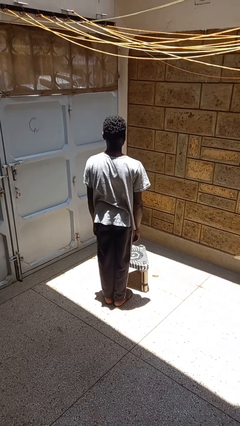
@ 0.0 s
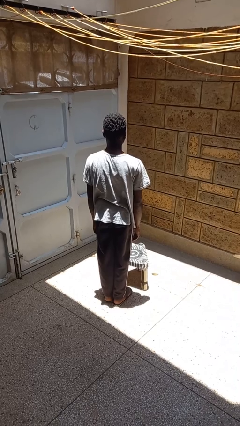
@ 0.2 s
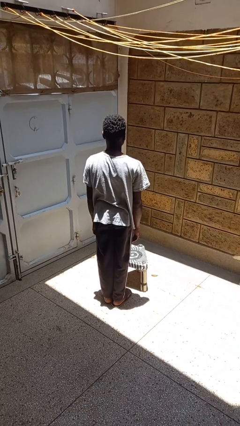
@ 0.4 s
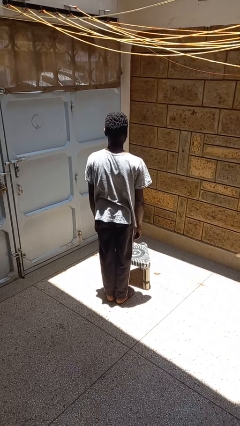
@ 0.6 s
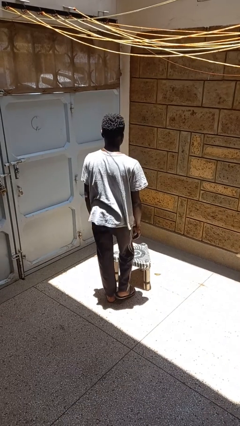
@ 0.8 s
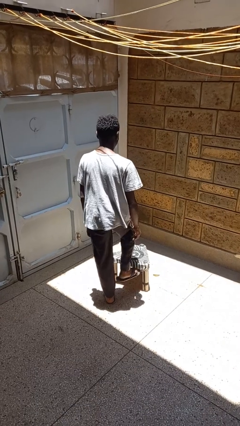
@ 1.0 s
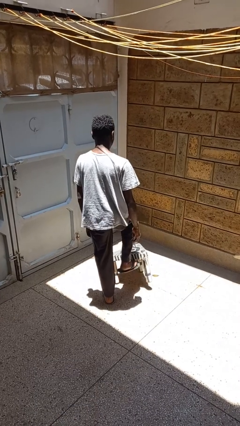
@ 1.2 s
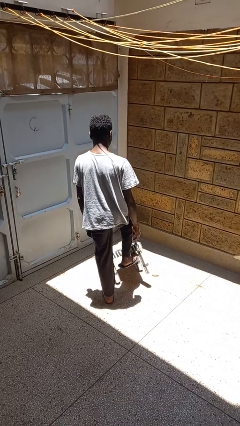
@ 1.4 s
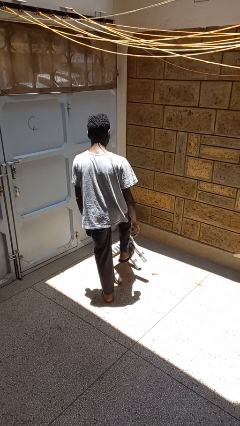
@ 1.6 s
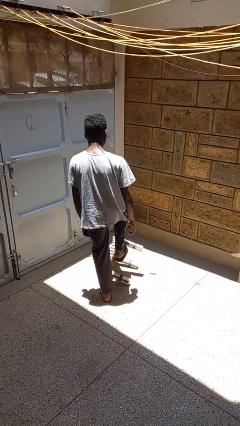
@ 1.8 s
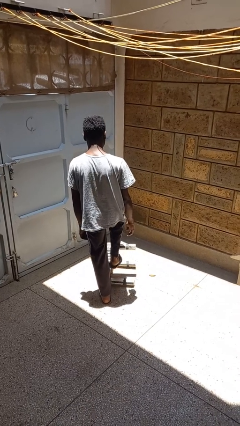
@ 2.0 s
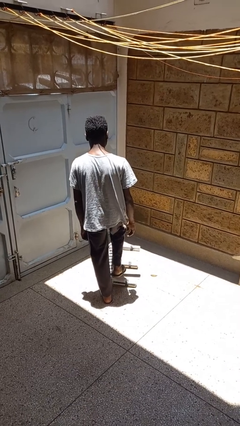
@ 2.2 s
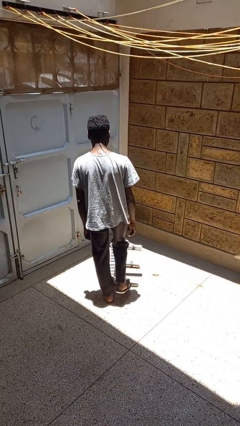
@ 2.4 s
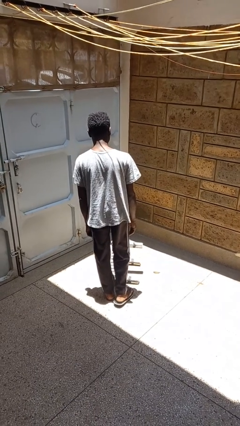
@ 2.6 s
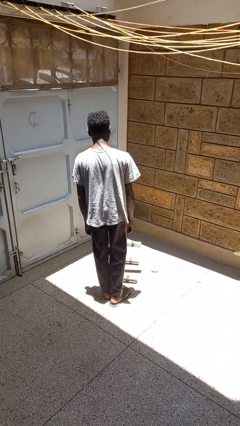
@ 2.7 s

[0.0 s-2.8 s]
person knocks over furniture

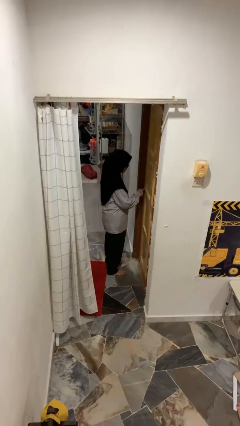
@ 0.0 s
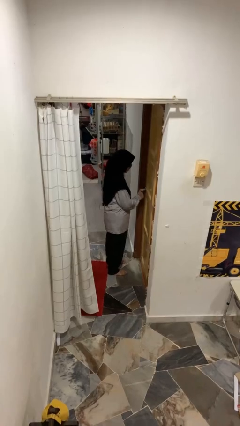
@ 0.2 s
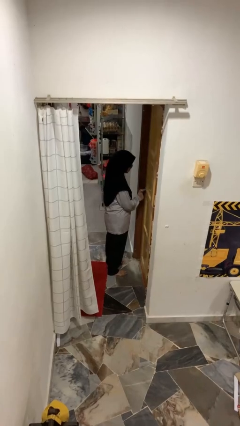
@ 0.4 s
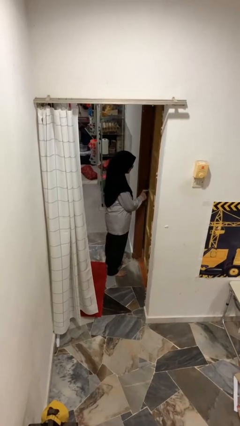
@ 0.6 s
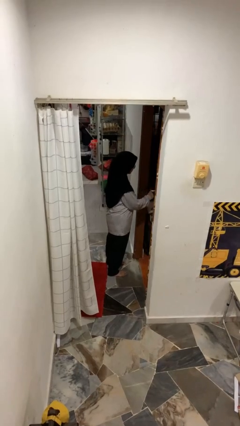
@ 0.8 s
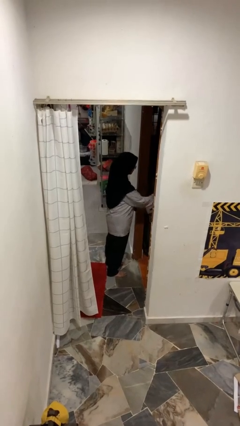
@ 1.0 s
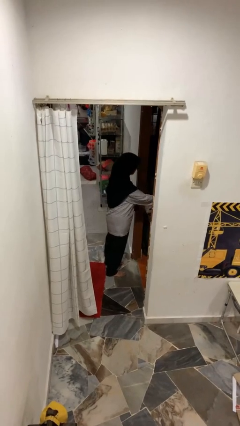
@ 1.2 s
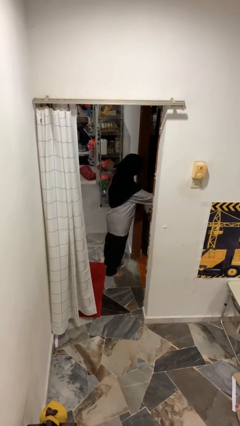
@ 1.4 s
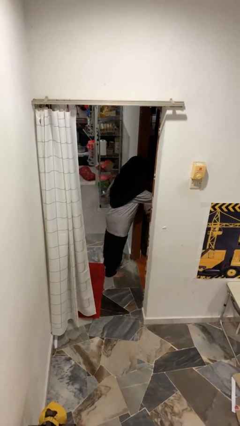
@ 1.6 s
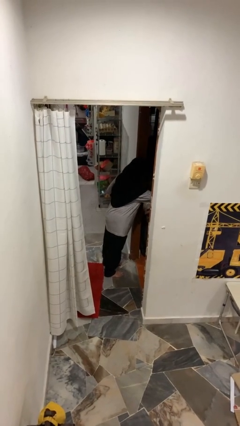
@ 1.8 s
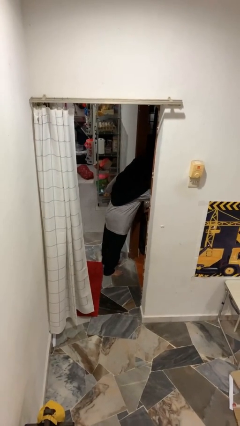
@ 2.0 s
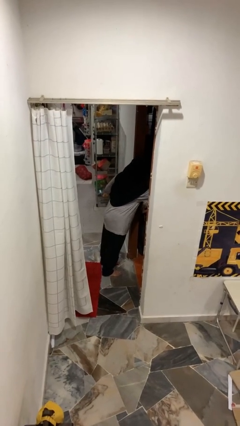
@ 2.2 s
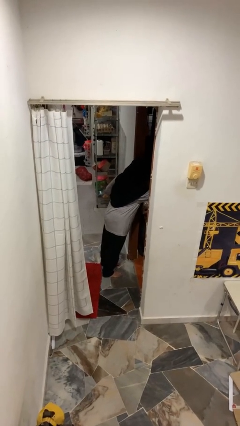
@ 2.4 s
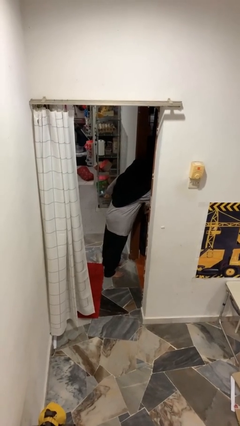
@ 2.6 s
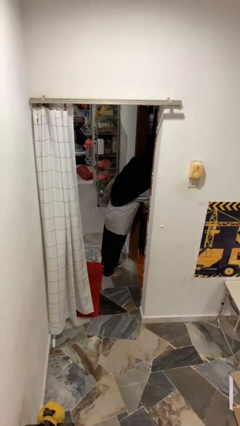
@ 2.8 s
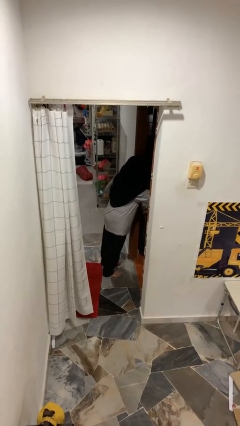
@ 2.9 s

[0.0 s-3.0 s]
person opens facility door

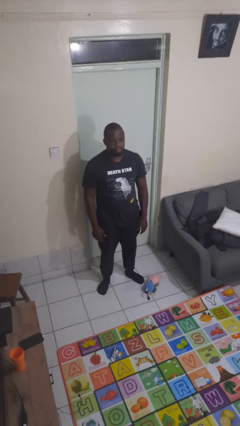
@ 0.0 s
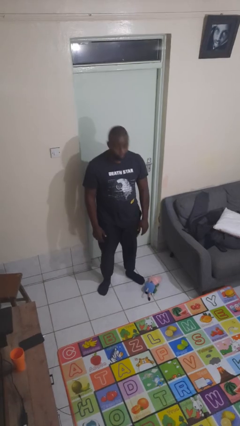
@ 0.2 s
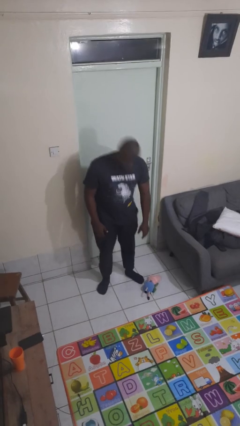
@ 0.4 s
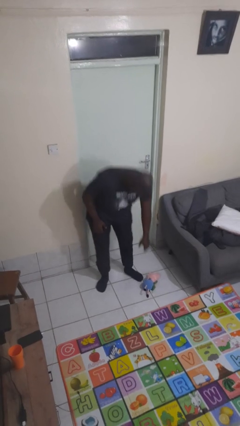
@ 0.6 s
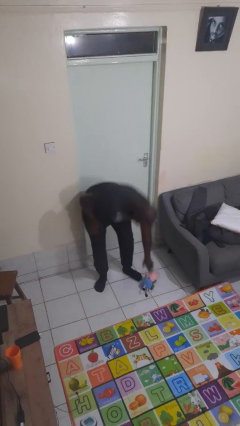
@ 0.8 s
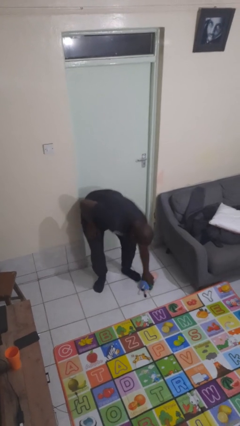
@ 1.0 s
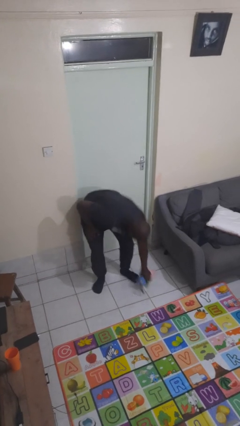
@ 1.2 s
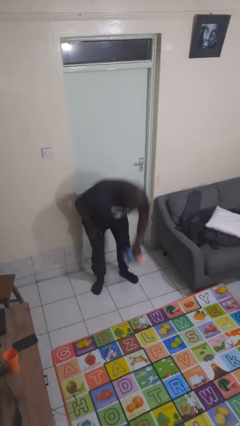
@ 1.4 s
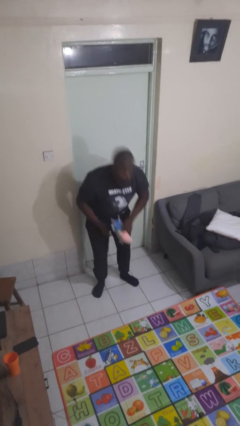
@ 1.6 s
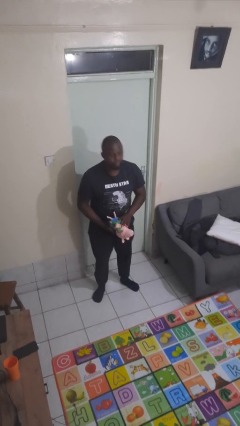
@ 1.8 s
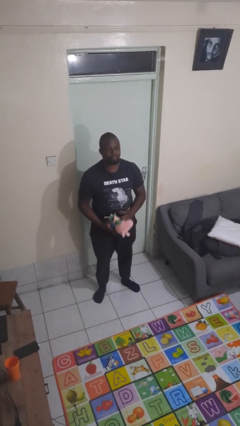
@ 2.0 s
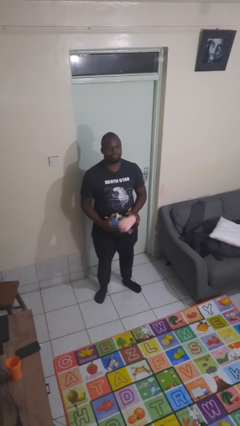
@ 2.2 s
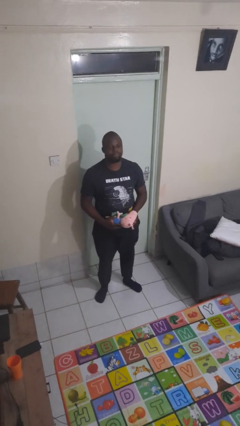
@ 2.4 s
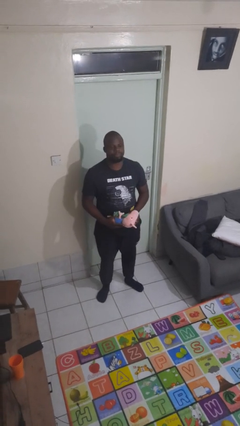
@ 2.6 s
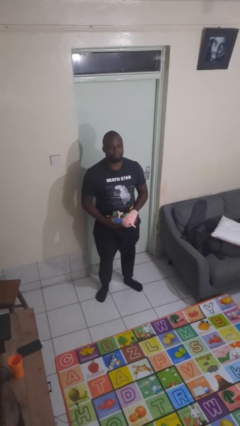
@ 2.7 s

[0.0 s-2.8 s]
person picks up object from floor

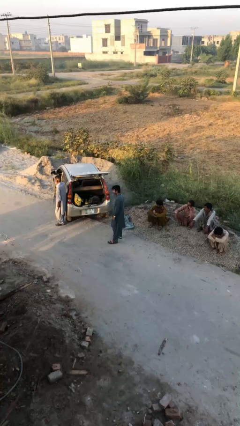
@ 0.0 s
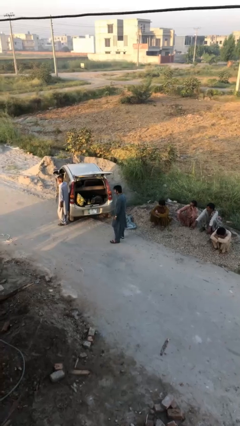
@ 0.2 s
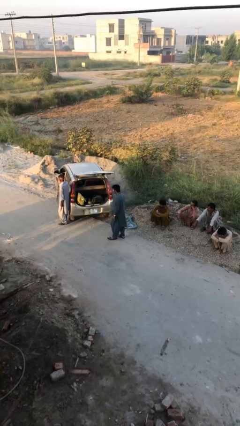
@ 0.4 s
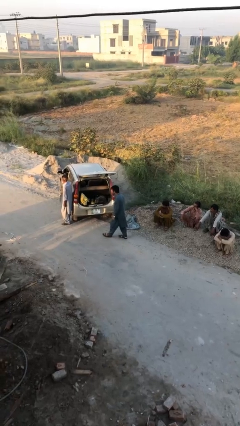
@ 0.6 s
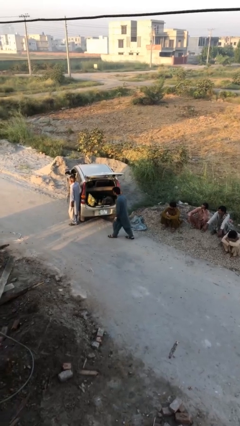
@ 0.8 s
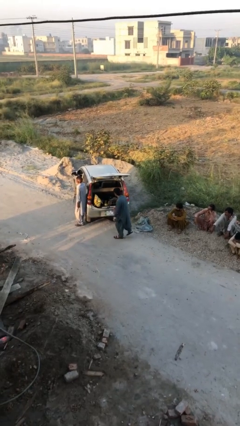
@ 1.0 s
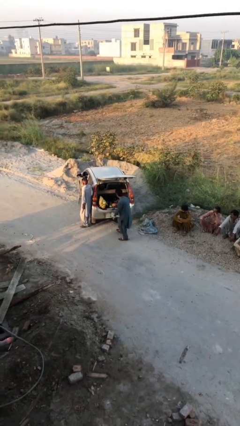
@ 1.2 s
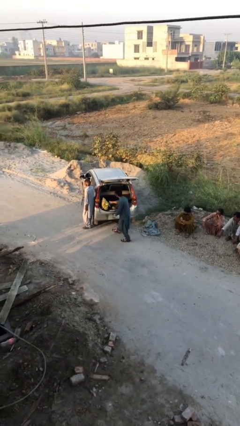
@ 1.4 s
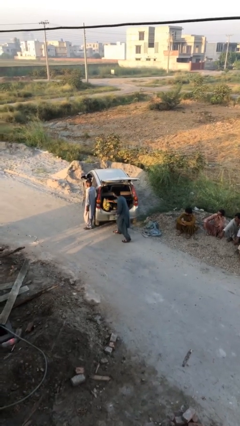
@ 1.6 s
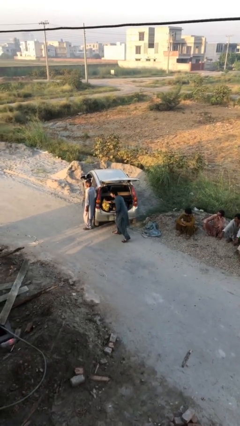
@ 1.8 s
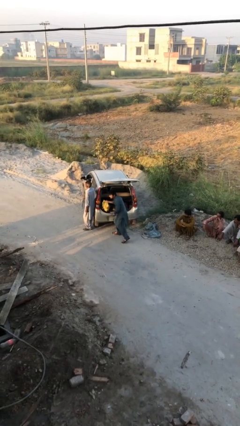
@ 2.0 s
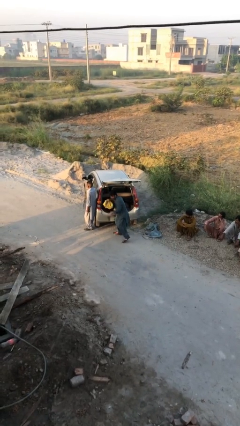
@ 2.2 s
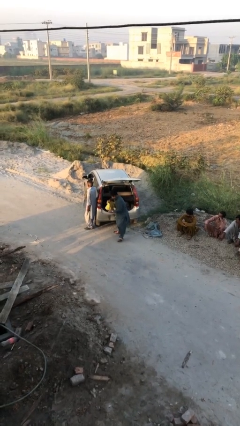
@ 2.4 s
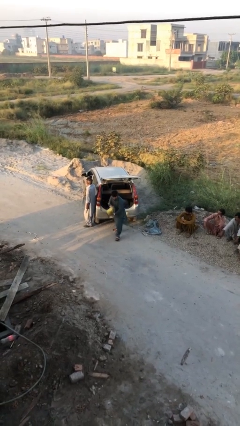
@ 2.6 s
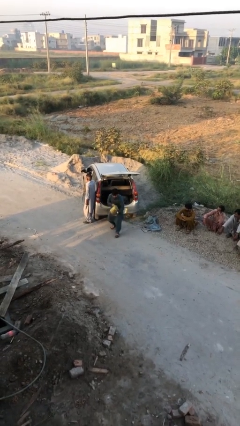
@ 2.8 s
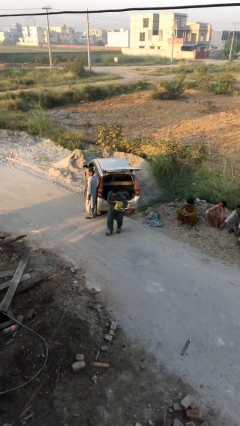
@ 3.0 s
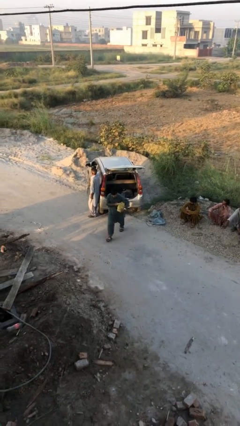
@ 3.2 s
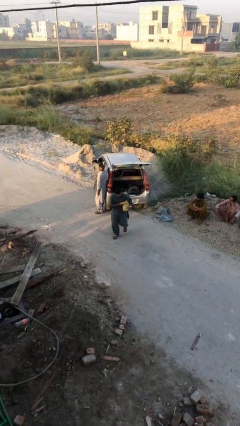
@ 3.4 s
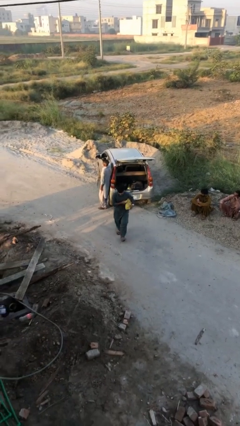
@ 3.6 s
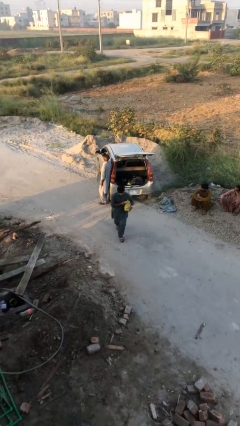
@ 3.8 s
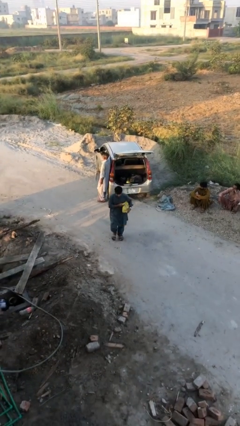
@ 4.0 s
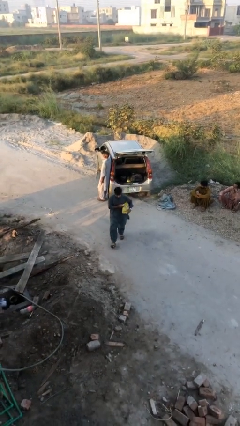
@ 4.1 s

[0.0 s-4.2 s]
person steals object from person

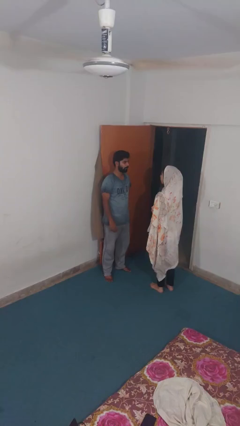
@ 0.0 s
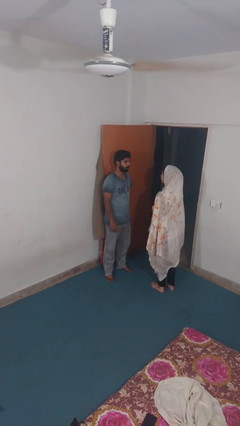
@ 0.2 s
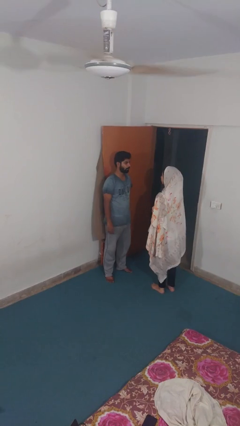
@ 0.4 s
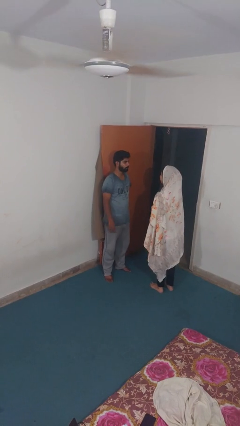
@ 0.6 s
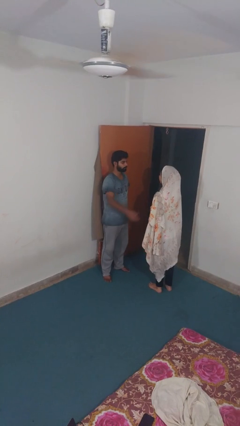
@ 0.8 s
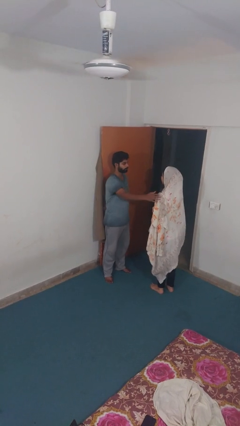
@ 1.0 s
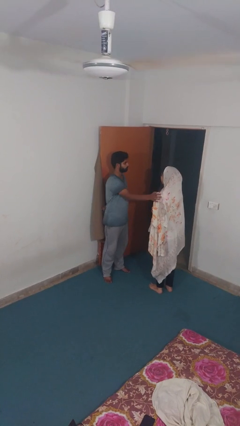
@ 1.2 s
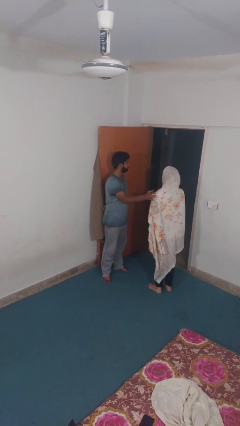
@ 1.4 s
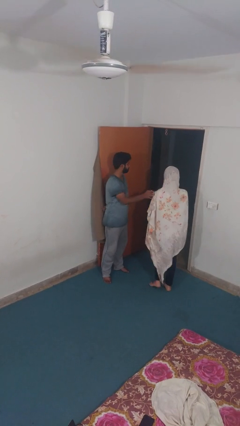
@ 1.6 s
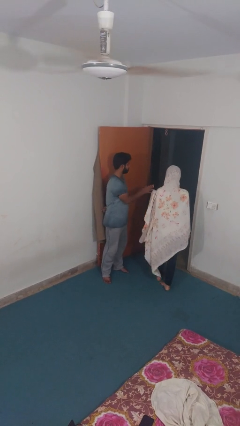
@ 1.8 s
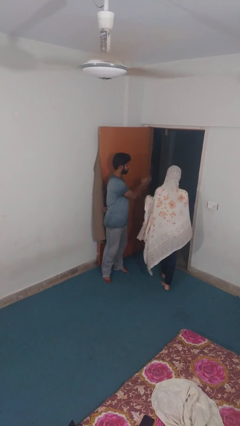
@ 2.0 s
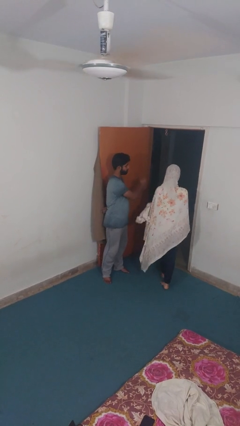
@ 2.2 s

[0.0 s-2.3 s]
person shoves person

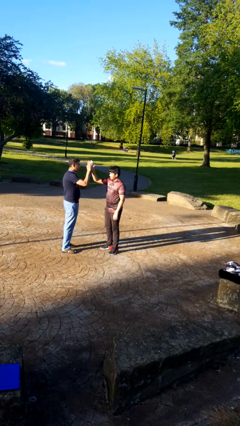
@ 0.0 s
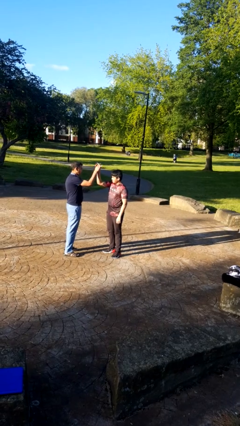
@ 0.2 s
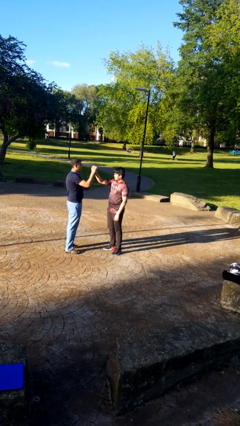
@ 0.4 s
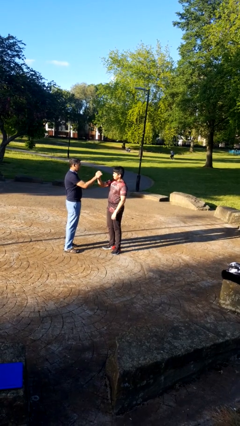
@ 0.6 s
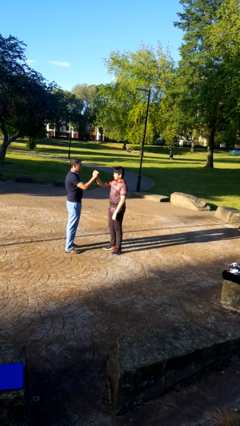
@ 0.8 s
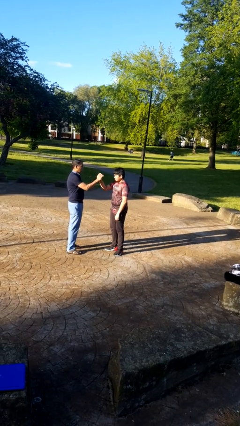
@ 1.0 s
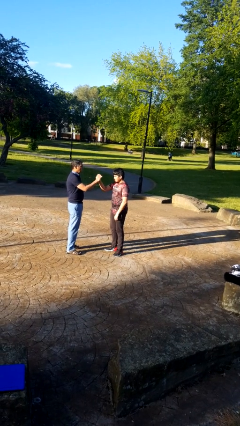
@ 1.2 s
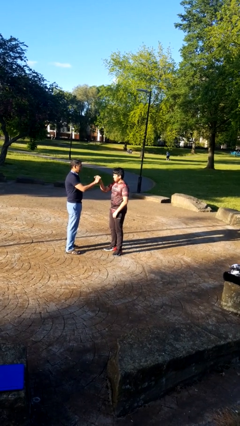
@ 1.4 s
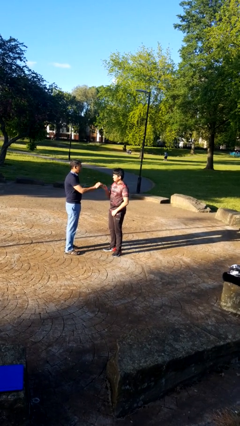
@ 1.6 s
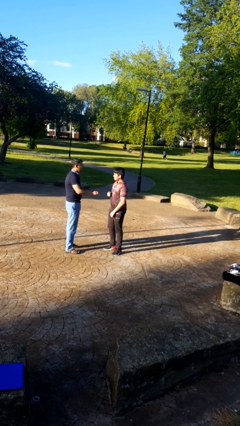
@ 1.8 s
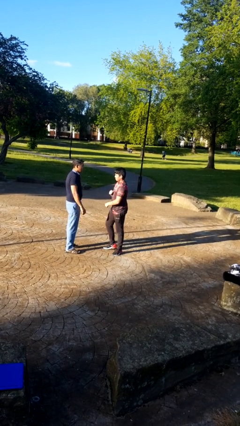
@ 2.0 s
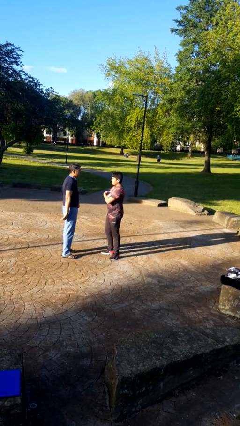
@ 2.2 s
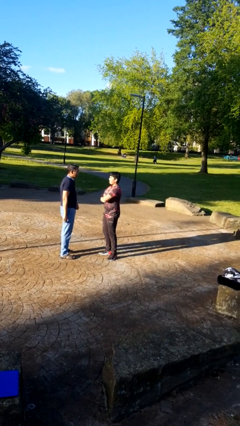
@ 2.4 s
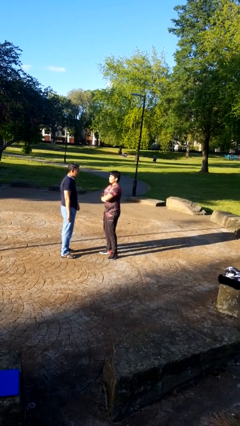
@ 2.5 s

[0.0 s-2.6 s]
person highfives hand
